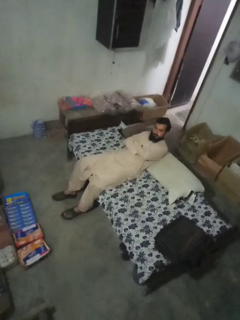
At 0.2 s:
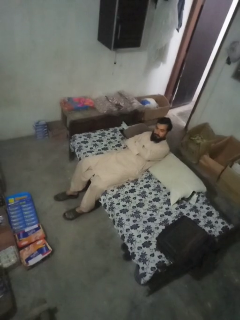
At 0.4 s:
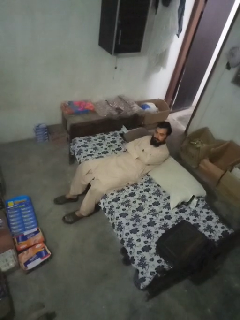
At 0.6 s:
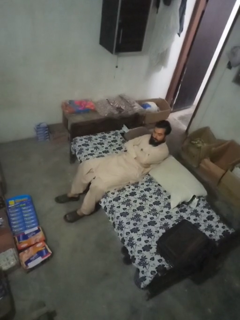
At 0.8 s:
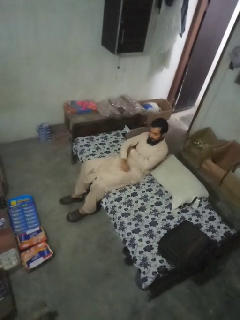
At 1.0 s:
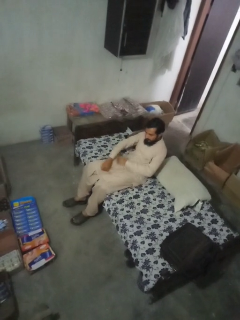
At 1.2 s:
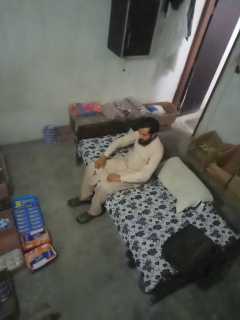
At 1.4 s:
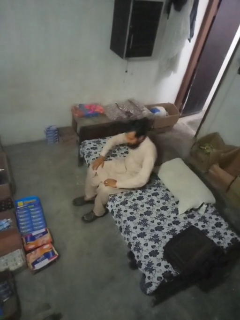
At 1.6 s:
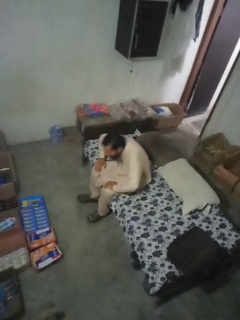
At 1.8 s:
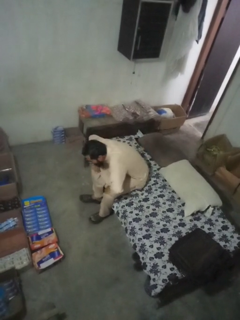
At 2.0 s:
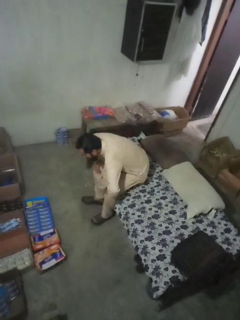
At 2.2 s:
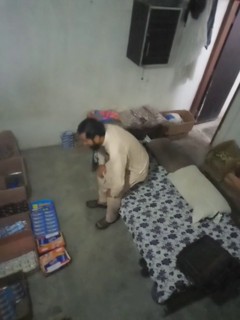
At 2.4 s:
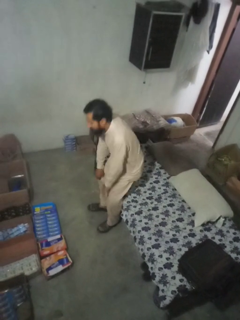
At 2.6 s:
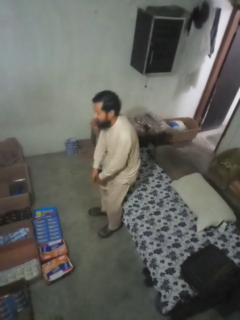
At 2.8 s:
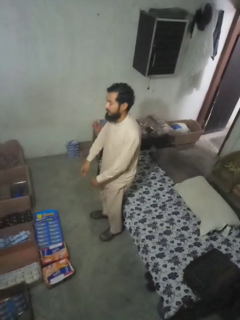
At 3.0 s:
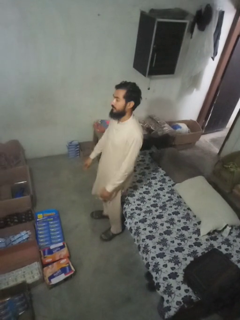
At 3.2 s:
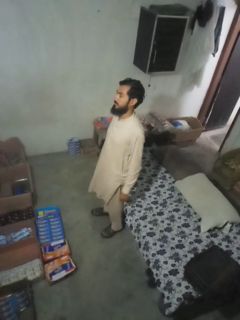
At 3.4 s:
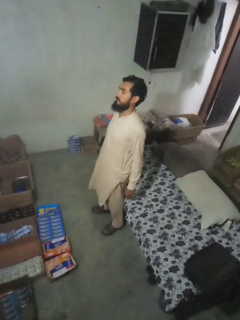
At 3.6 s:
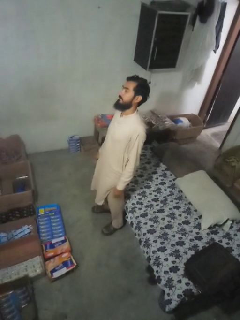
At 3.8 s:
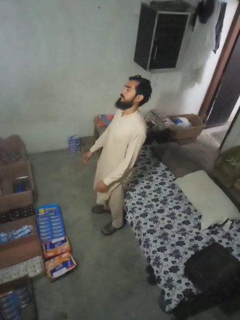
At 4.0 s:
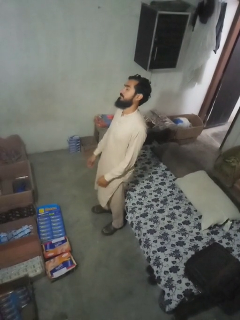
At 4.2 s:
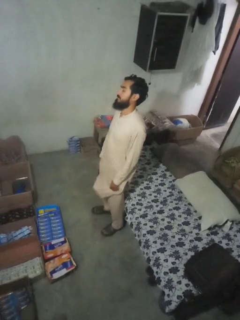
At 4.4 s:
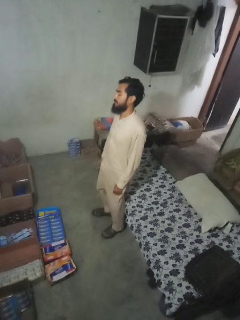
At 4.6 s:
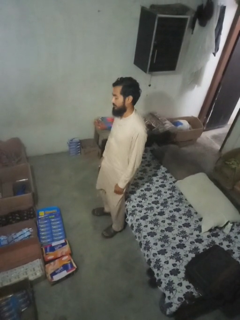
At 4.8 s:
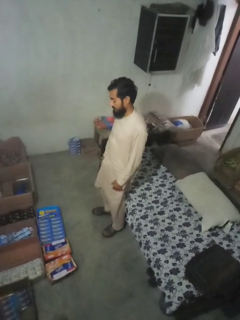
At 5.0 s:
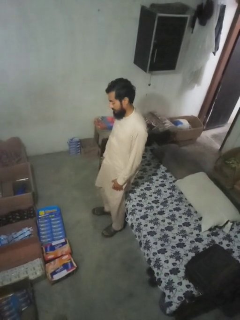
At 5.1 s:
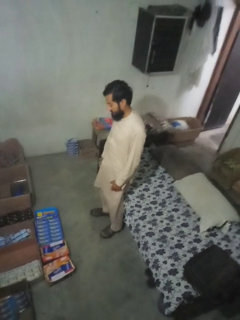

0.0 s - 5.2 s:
person stands up

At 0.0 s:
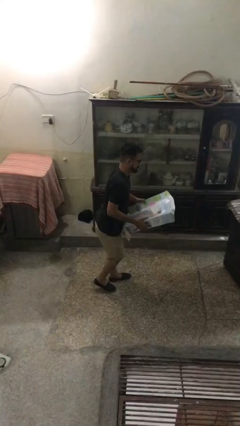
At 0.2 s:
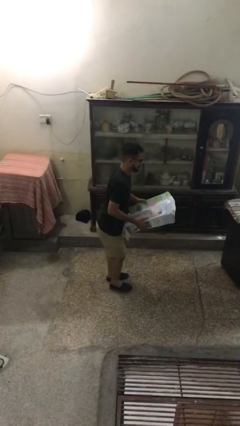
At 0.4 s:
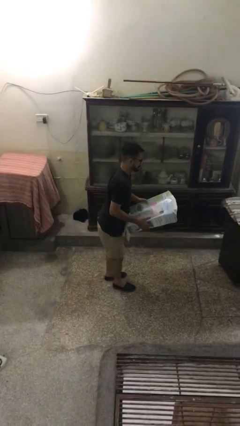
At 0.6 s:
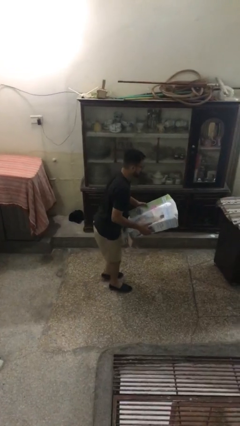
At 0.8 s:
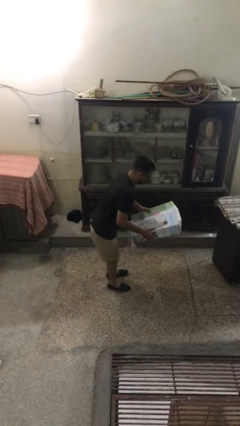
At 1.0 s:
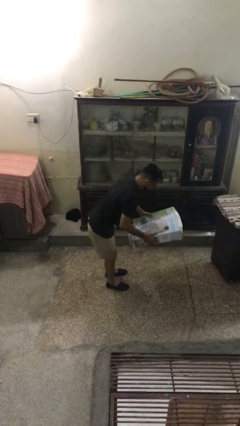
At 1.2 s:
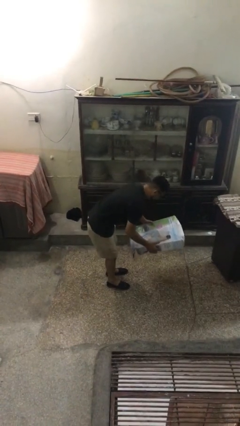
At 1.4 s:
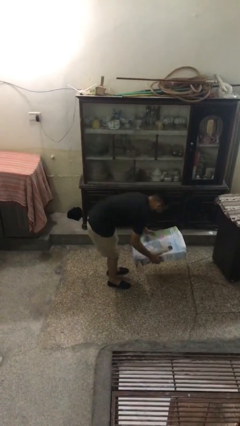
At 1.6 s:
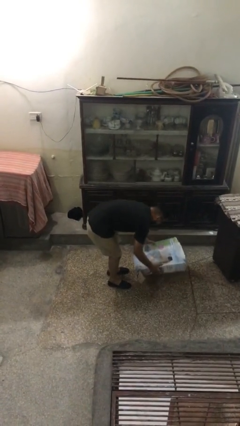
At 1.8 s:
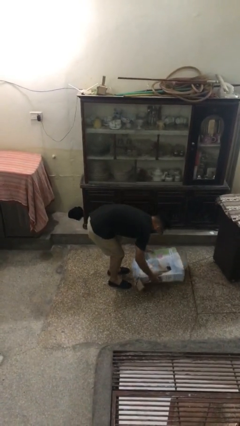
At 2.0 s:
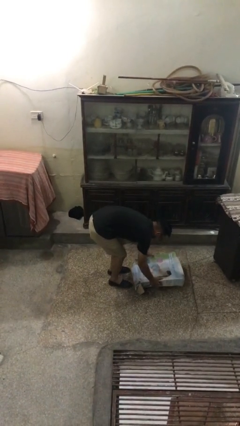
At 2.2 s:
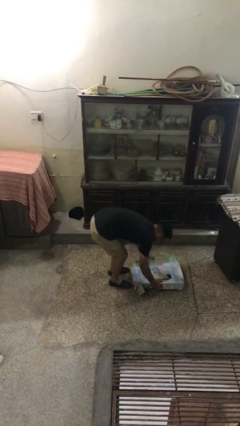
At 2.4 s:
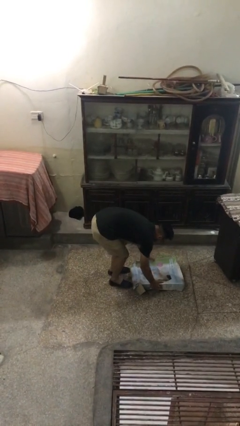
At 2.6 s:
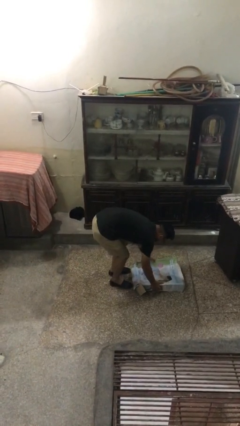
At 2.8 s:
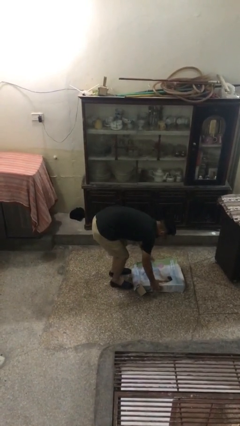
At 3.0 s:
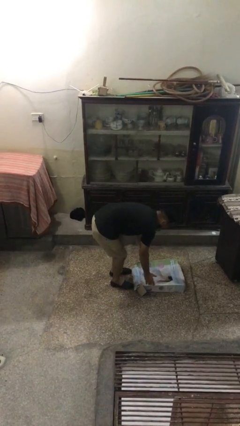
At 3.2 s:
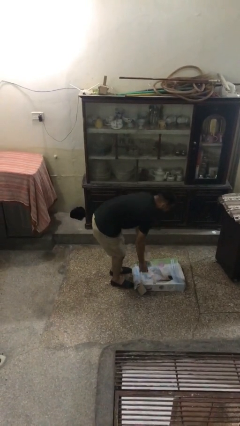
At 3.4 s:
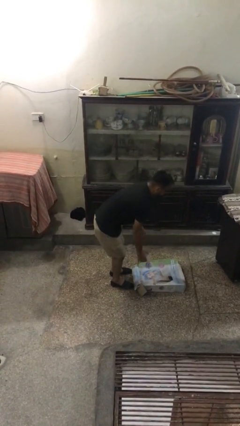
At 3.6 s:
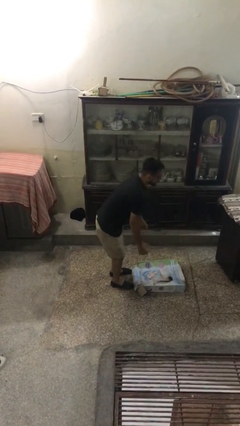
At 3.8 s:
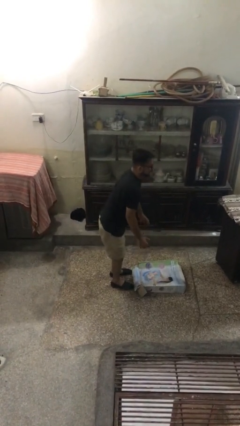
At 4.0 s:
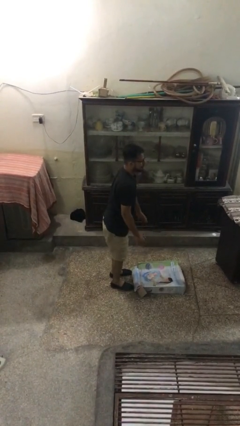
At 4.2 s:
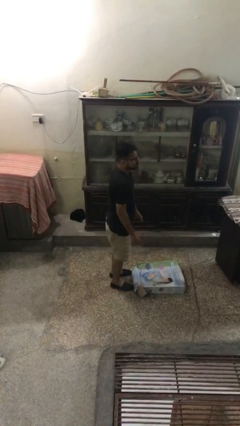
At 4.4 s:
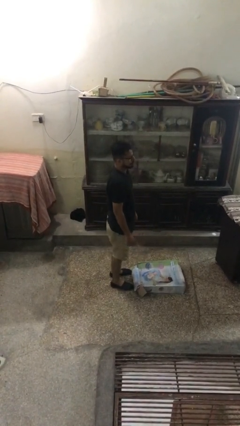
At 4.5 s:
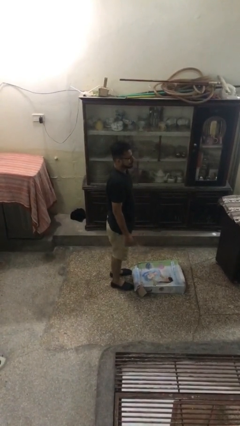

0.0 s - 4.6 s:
person puts down object on floor

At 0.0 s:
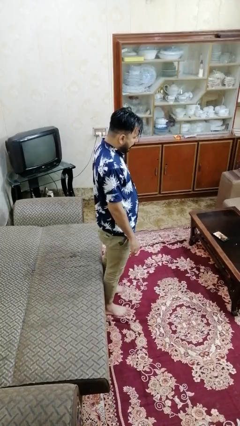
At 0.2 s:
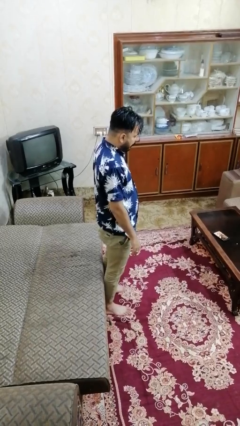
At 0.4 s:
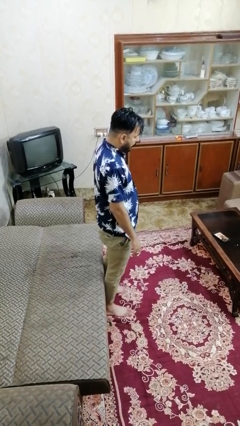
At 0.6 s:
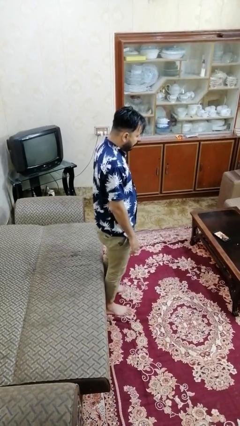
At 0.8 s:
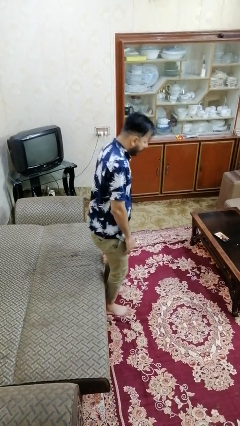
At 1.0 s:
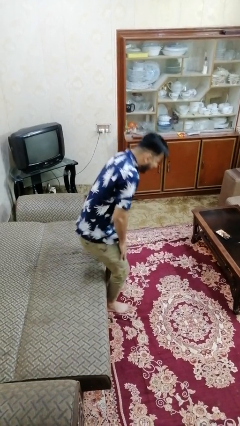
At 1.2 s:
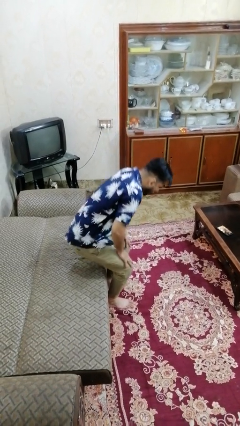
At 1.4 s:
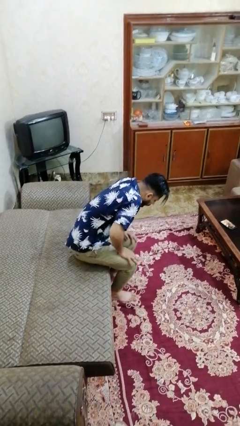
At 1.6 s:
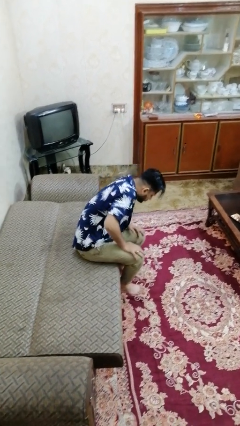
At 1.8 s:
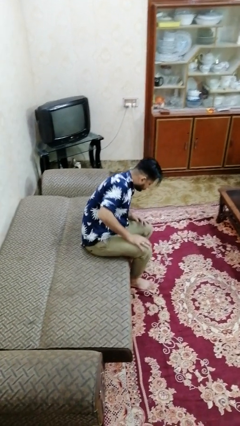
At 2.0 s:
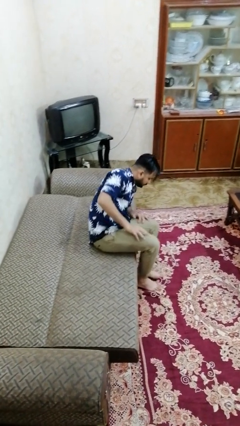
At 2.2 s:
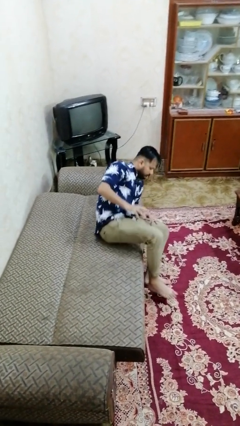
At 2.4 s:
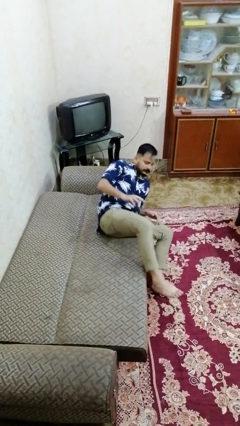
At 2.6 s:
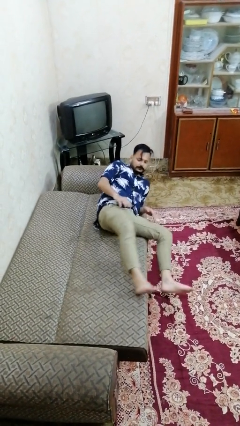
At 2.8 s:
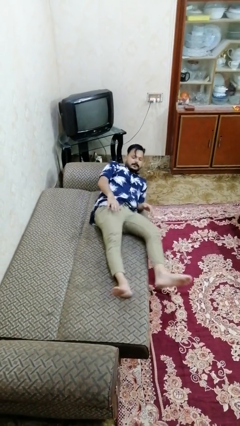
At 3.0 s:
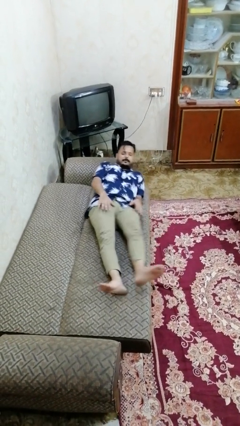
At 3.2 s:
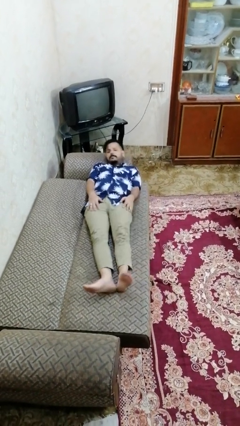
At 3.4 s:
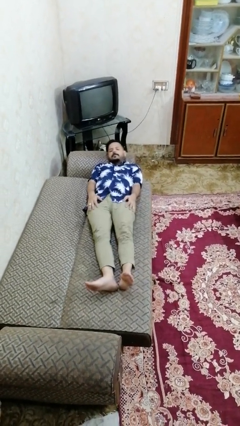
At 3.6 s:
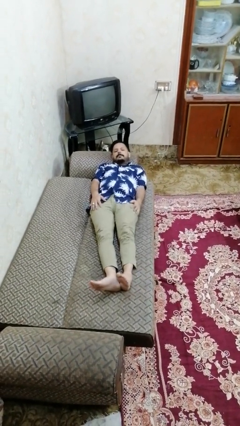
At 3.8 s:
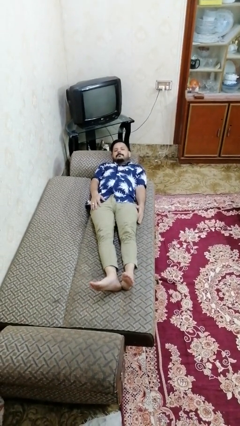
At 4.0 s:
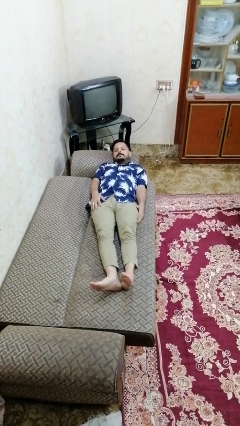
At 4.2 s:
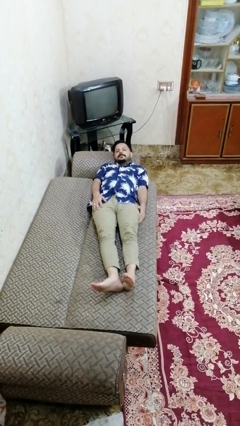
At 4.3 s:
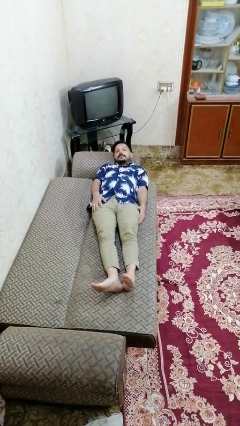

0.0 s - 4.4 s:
person lies down on bed

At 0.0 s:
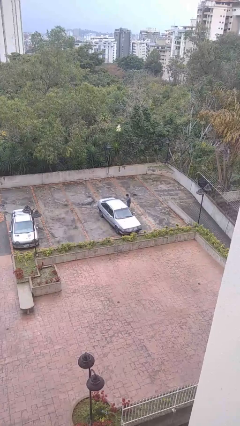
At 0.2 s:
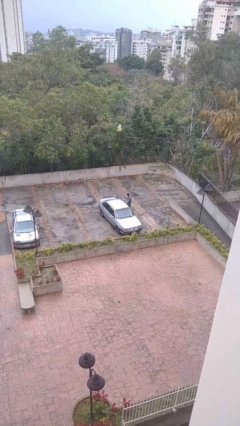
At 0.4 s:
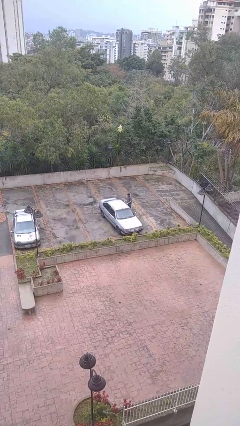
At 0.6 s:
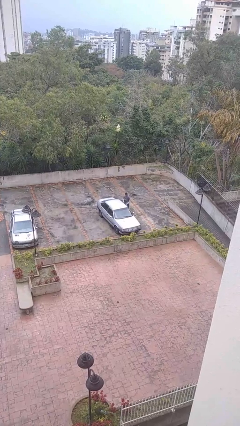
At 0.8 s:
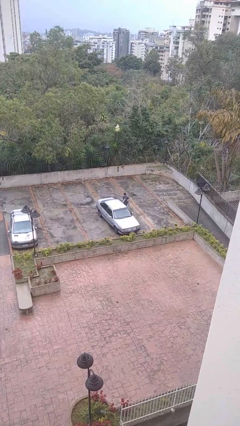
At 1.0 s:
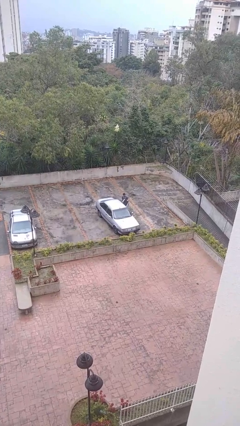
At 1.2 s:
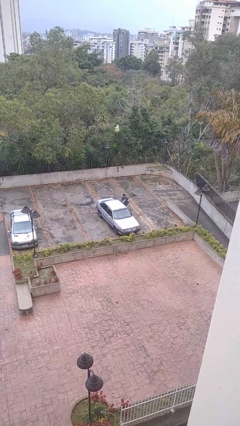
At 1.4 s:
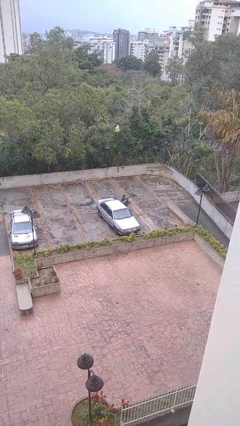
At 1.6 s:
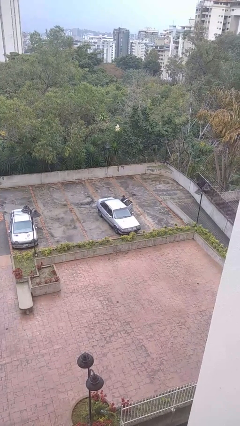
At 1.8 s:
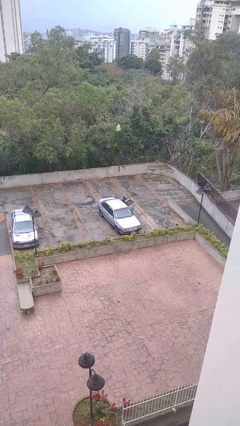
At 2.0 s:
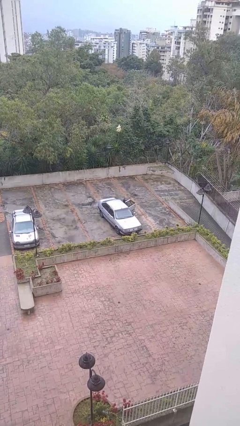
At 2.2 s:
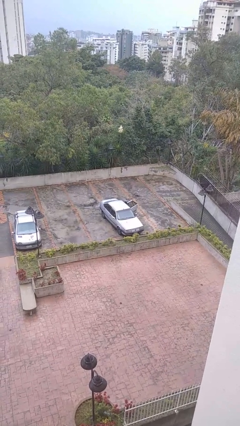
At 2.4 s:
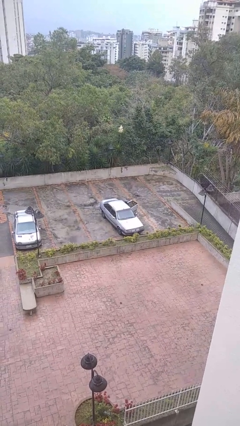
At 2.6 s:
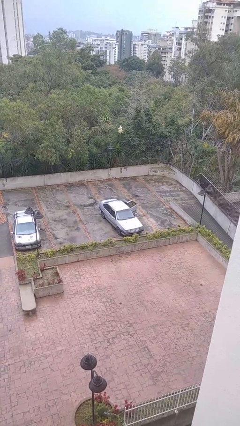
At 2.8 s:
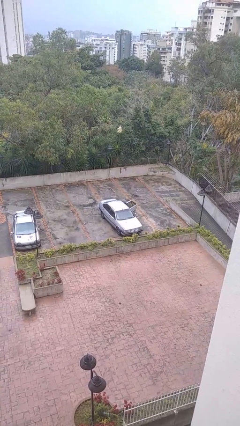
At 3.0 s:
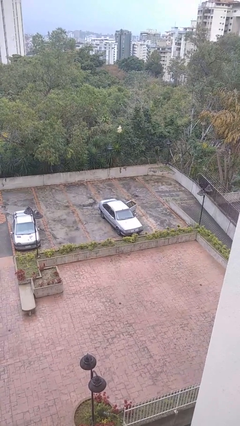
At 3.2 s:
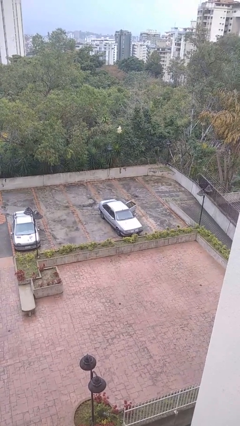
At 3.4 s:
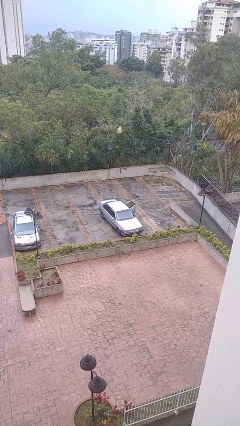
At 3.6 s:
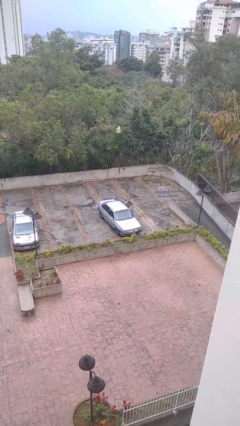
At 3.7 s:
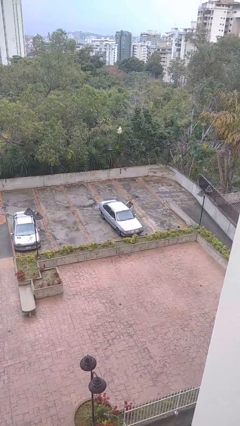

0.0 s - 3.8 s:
car picks up person

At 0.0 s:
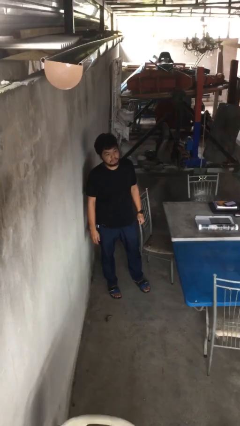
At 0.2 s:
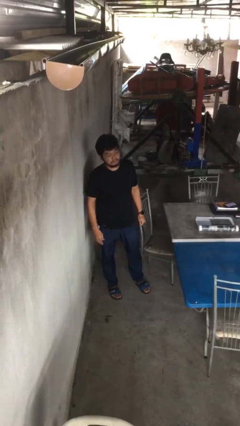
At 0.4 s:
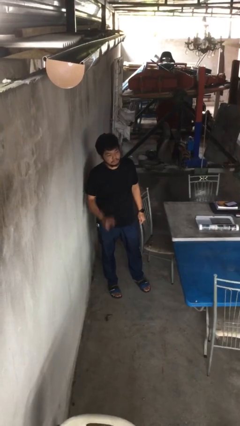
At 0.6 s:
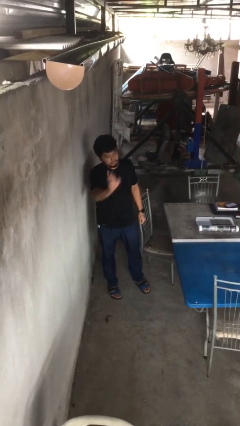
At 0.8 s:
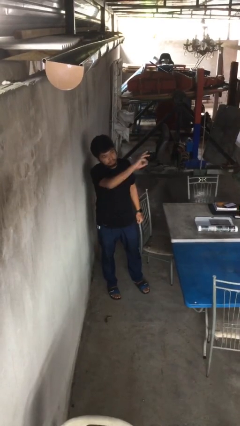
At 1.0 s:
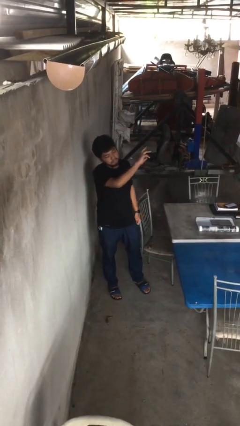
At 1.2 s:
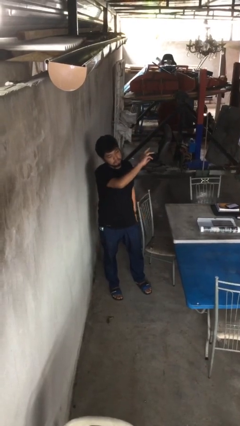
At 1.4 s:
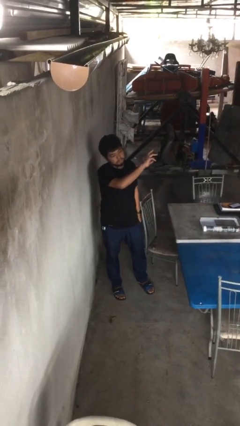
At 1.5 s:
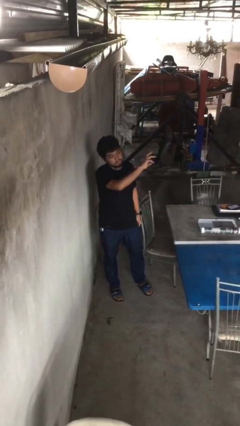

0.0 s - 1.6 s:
person gestures swipe left
